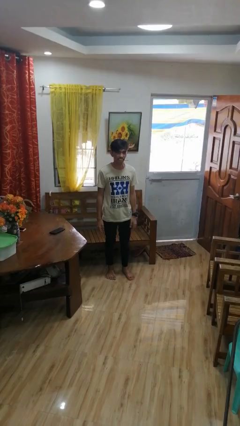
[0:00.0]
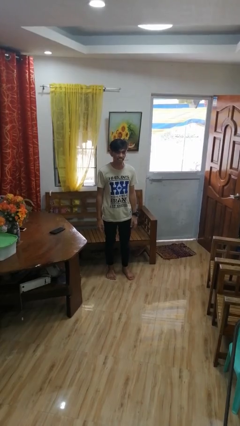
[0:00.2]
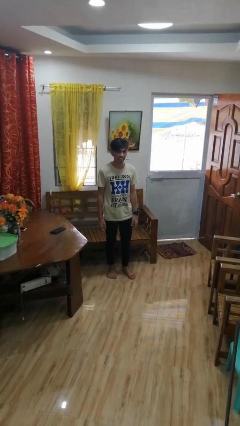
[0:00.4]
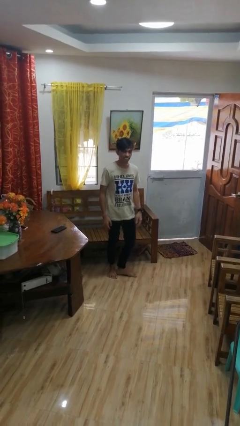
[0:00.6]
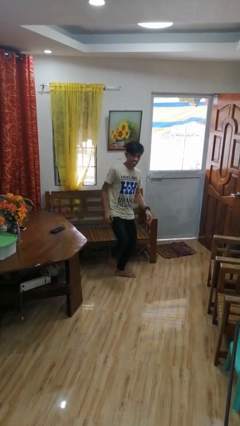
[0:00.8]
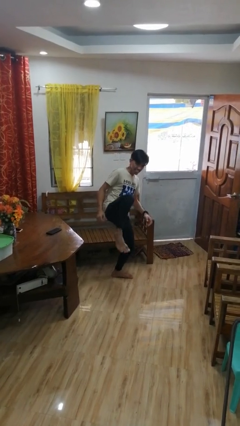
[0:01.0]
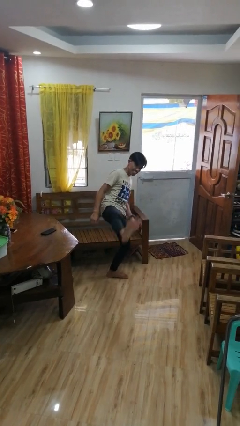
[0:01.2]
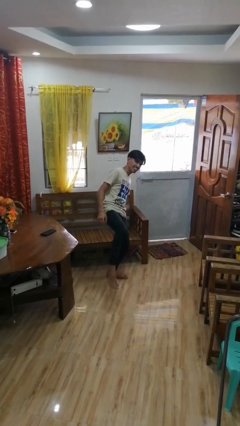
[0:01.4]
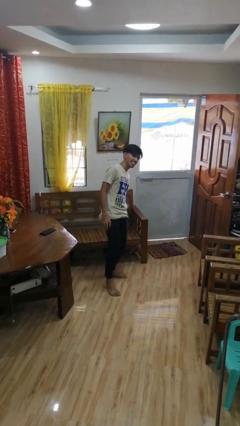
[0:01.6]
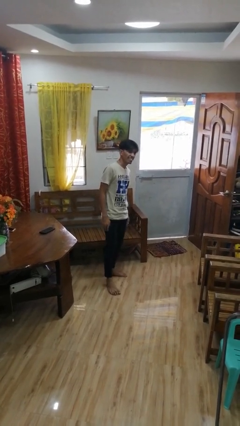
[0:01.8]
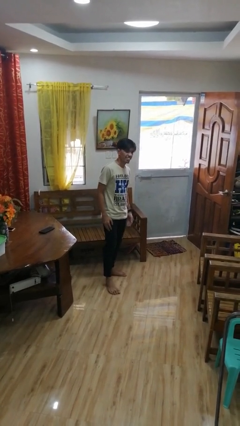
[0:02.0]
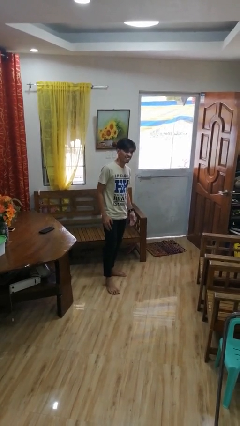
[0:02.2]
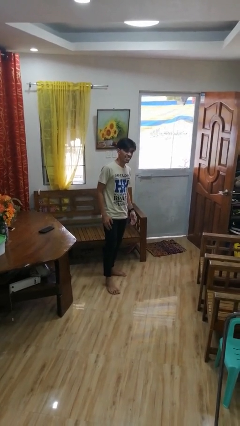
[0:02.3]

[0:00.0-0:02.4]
person karate kicks

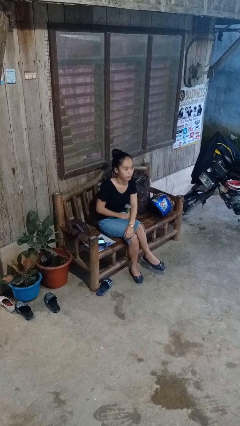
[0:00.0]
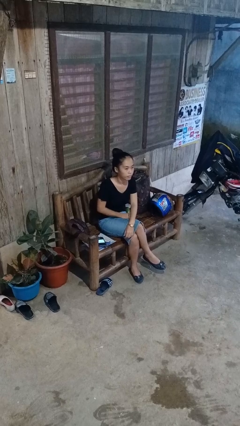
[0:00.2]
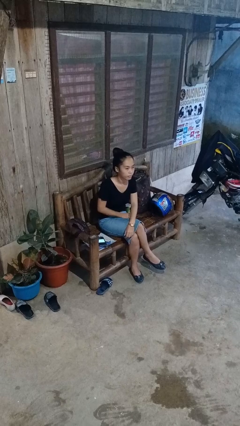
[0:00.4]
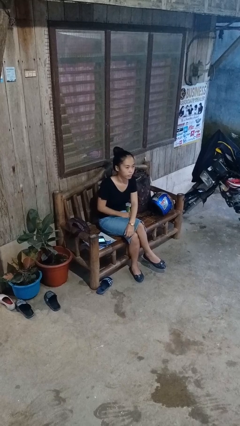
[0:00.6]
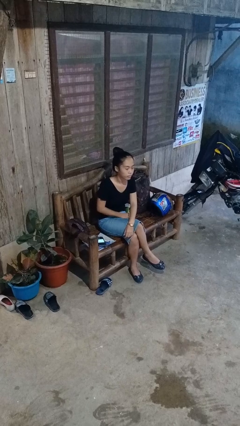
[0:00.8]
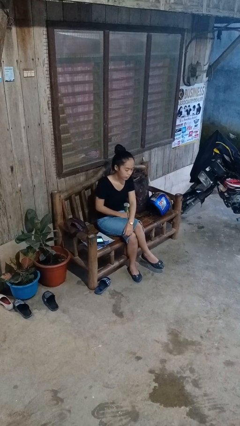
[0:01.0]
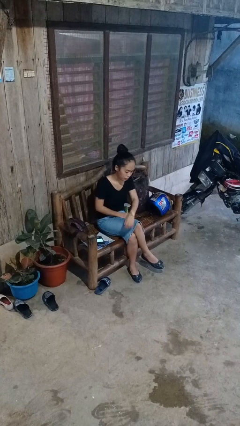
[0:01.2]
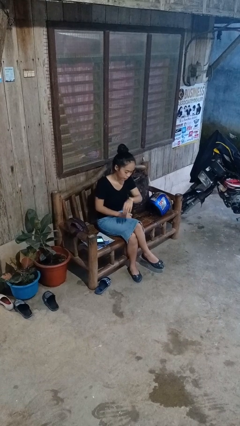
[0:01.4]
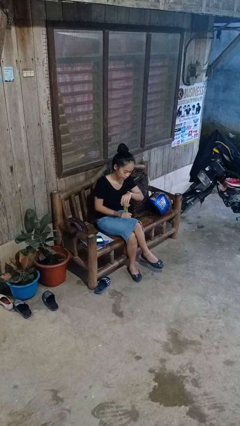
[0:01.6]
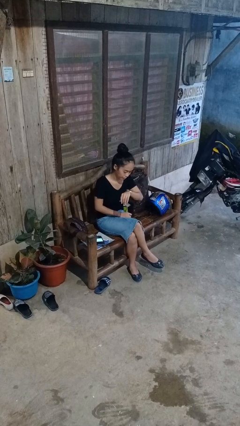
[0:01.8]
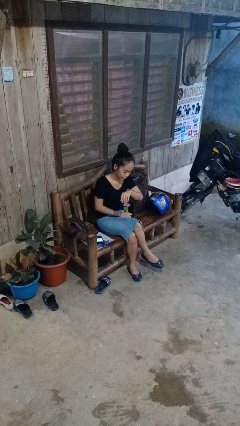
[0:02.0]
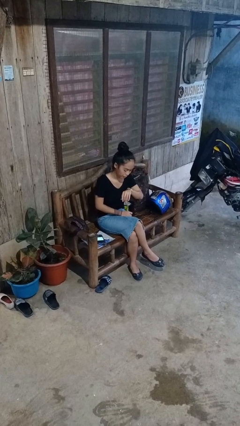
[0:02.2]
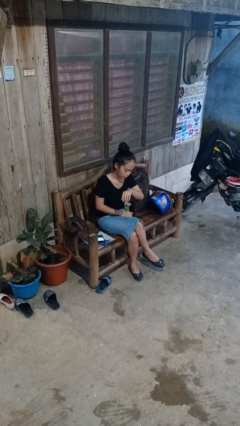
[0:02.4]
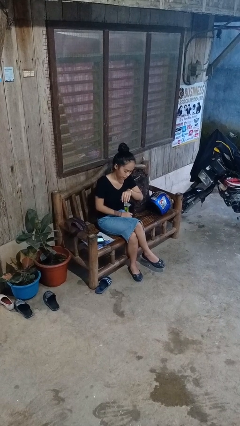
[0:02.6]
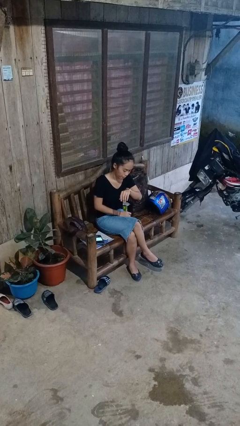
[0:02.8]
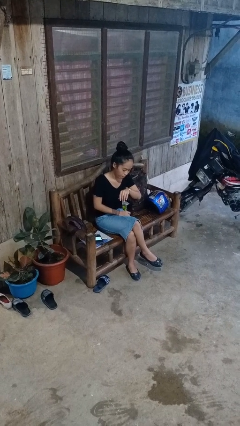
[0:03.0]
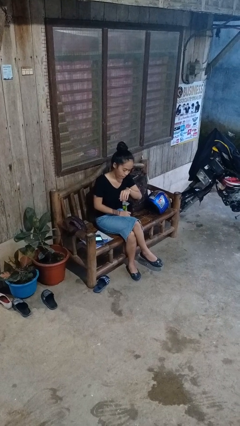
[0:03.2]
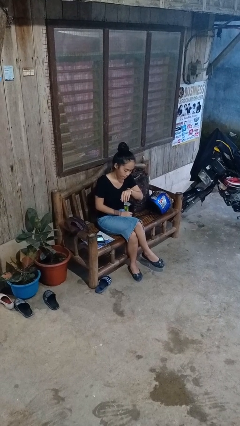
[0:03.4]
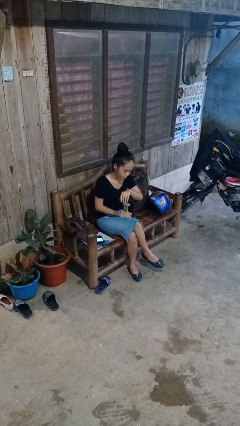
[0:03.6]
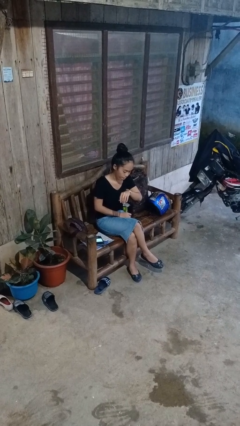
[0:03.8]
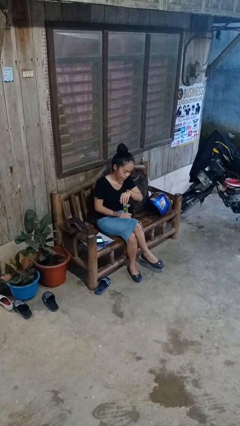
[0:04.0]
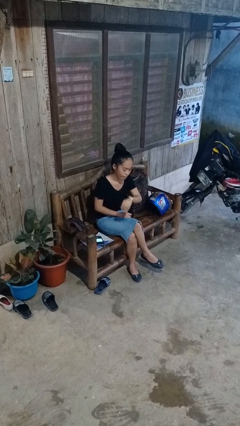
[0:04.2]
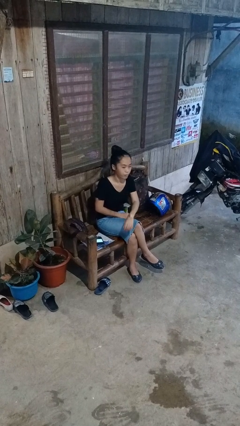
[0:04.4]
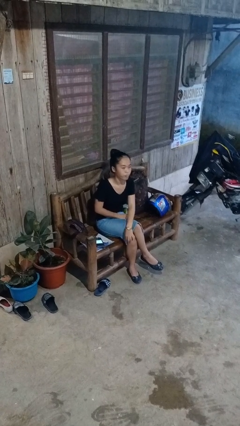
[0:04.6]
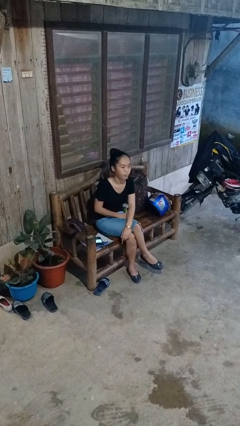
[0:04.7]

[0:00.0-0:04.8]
person looks at wristwatch

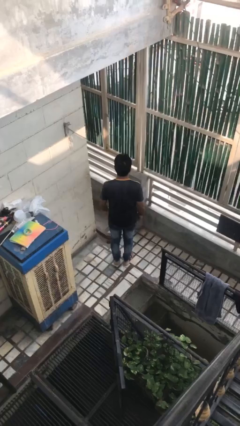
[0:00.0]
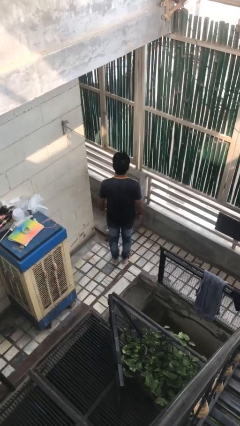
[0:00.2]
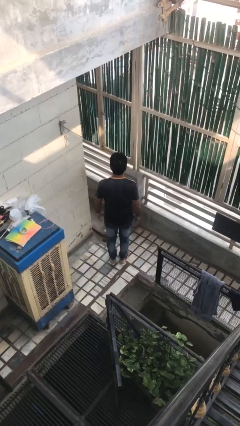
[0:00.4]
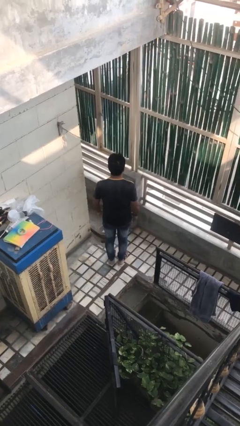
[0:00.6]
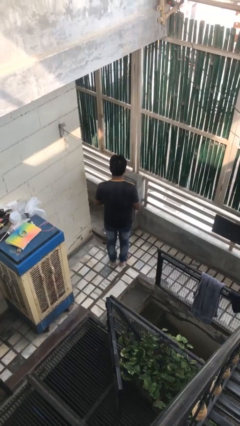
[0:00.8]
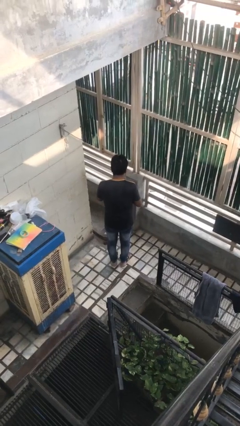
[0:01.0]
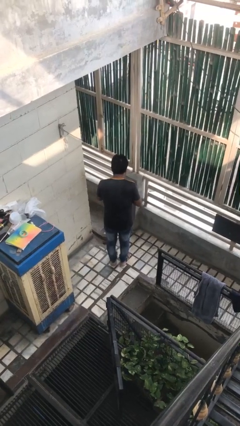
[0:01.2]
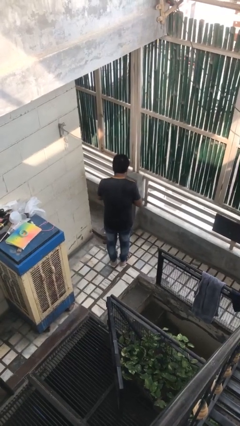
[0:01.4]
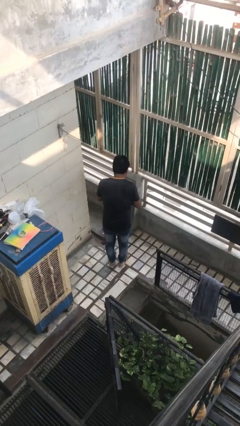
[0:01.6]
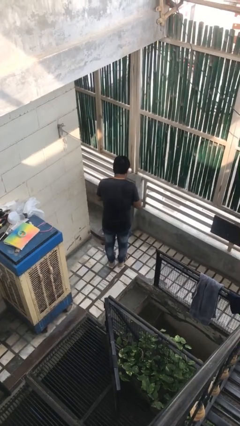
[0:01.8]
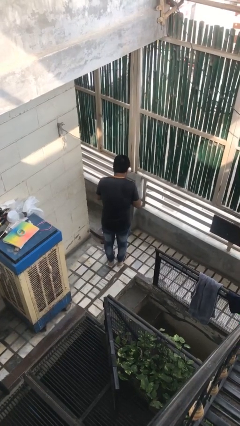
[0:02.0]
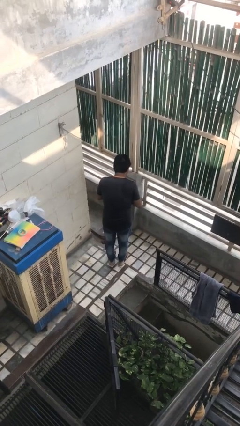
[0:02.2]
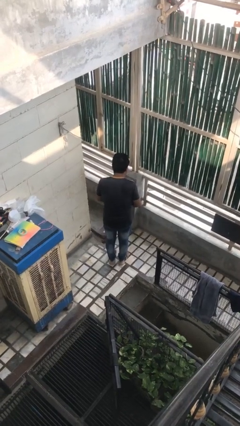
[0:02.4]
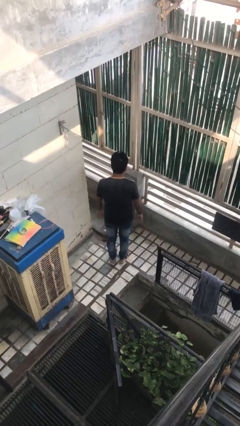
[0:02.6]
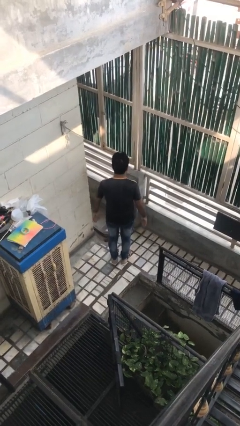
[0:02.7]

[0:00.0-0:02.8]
person prays

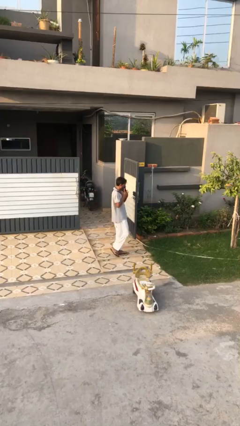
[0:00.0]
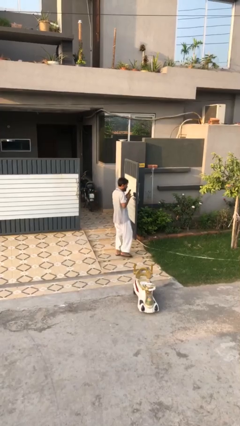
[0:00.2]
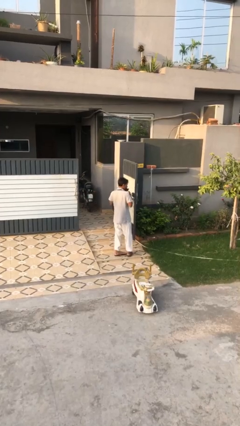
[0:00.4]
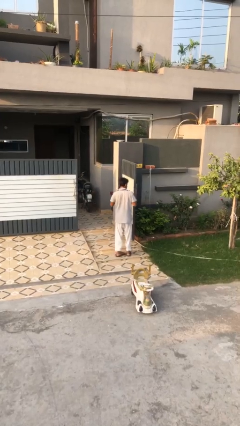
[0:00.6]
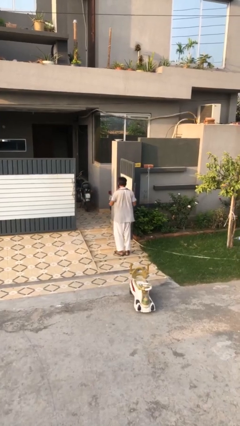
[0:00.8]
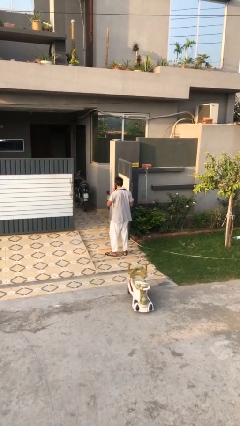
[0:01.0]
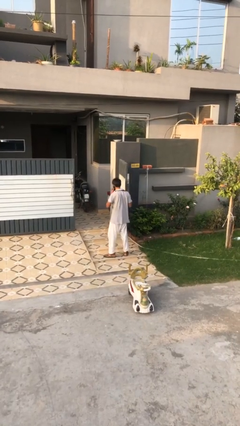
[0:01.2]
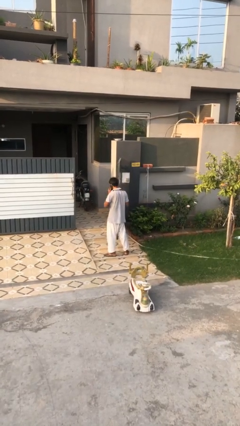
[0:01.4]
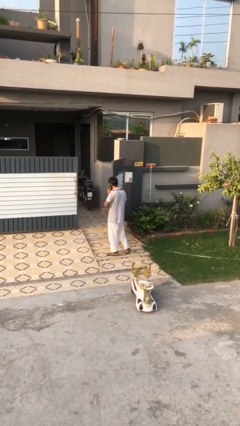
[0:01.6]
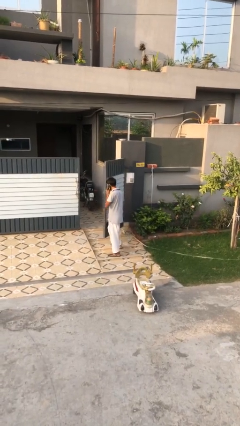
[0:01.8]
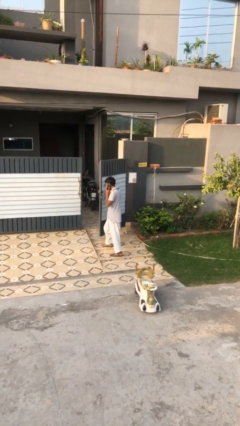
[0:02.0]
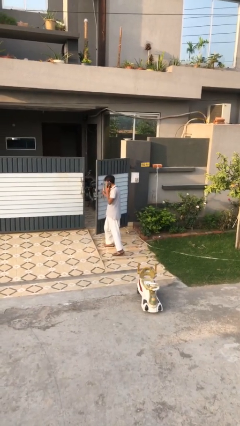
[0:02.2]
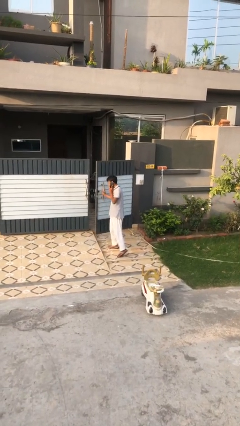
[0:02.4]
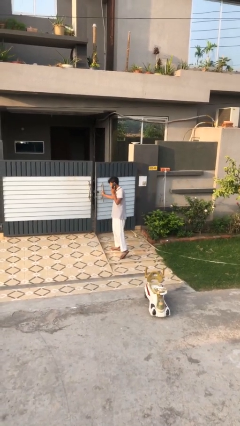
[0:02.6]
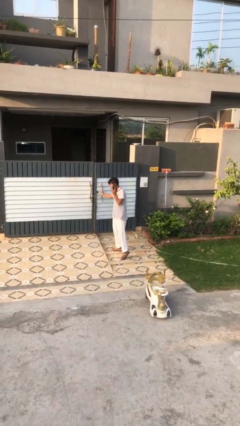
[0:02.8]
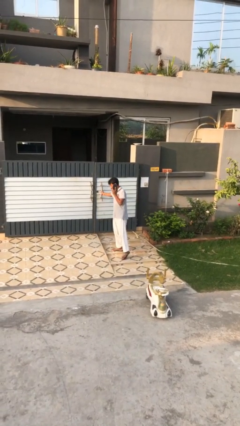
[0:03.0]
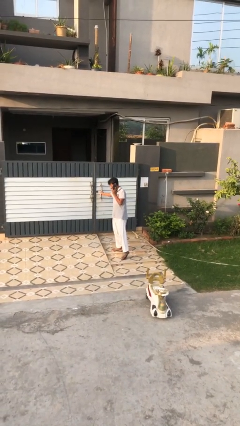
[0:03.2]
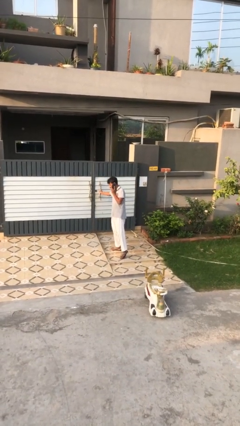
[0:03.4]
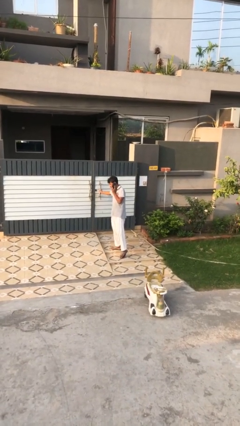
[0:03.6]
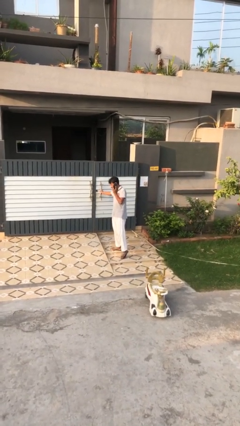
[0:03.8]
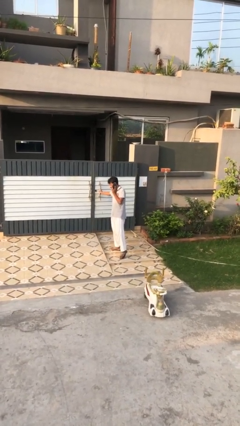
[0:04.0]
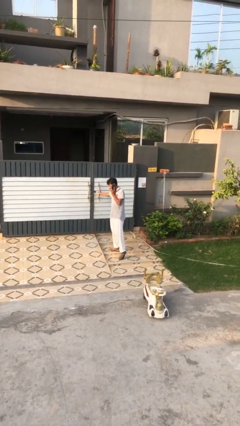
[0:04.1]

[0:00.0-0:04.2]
person closes facility door

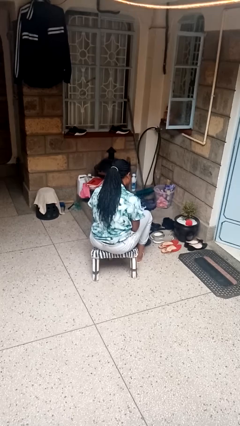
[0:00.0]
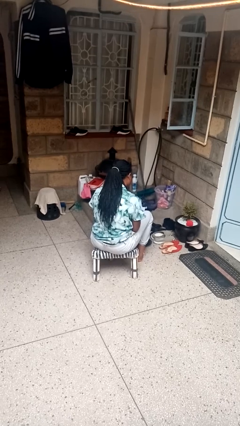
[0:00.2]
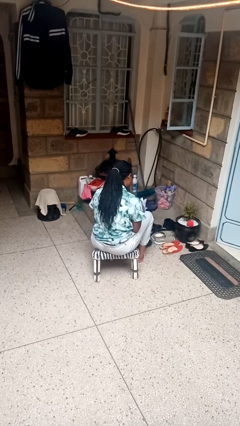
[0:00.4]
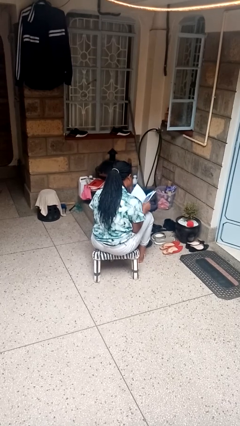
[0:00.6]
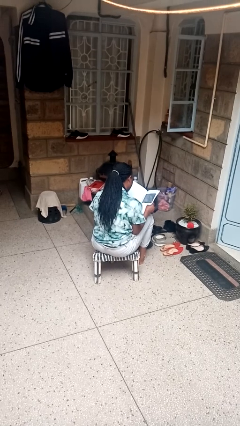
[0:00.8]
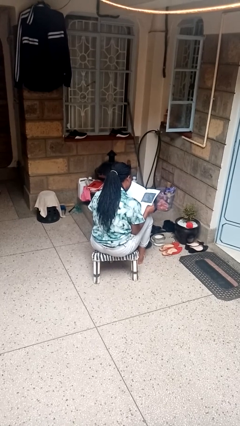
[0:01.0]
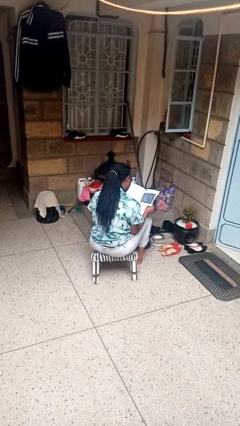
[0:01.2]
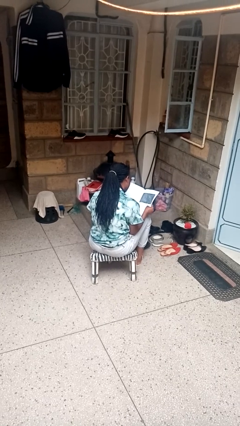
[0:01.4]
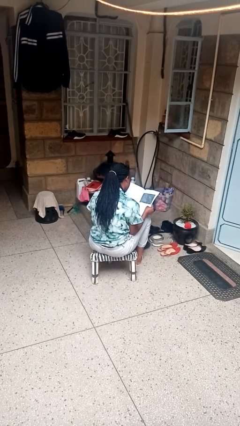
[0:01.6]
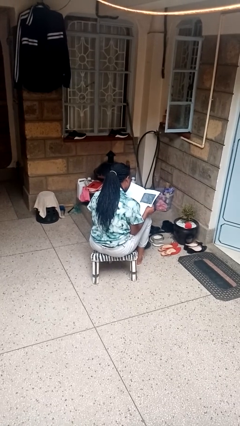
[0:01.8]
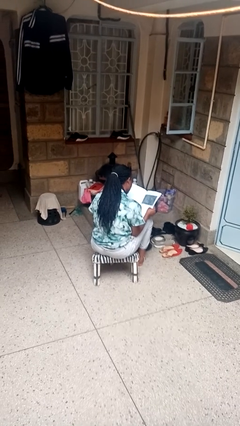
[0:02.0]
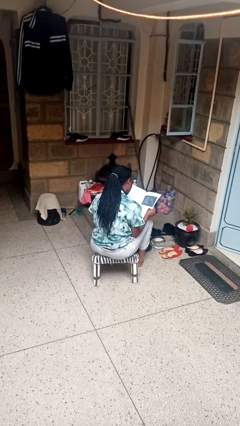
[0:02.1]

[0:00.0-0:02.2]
person reads magazine

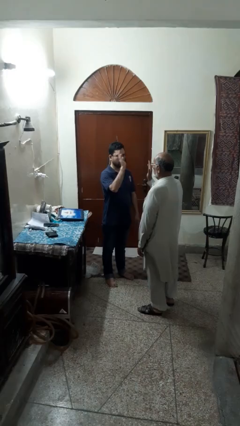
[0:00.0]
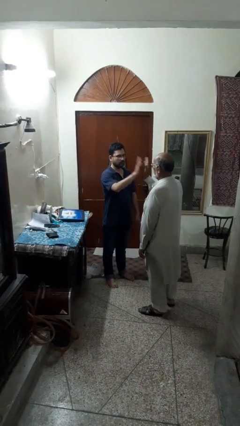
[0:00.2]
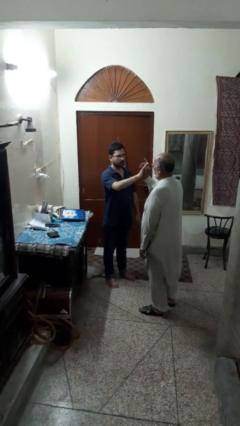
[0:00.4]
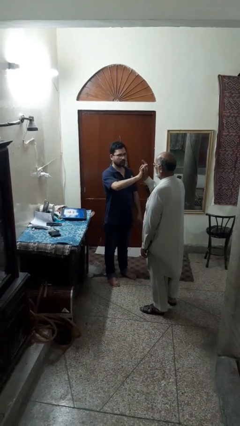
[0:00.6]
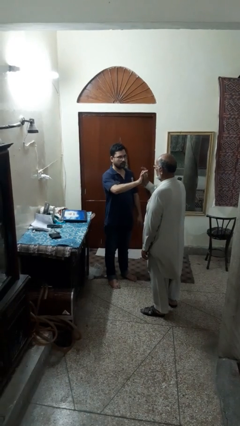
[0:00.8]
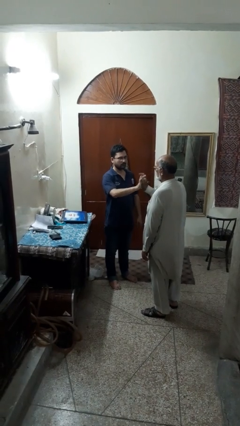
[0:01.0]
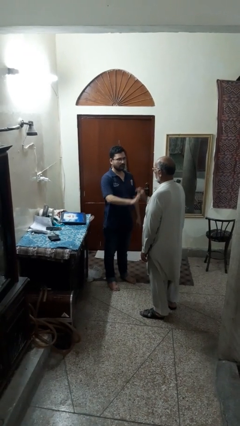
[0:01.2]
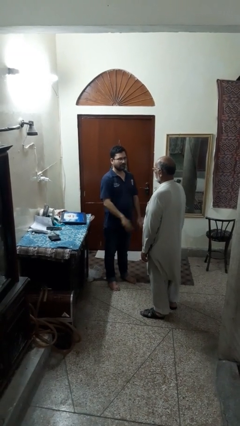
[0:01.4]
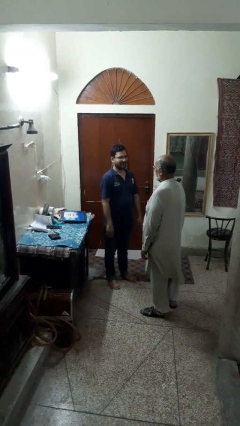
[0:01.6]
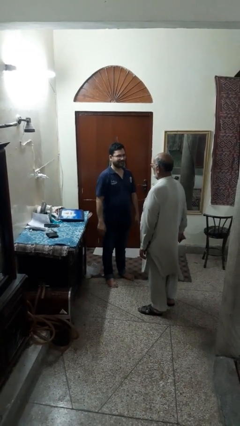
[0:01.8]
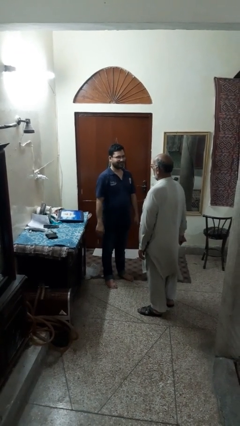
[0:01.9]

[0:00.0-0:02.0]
person highfives hand
